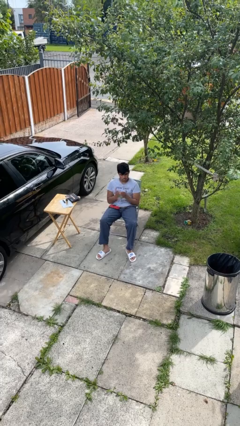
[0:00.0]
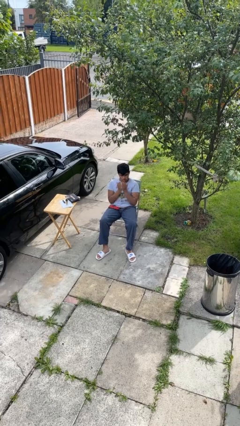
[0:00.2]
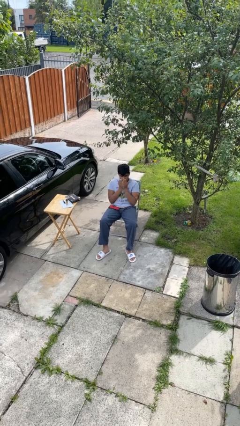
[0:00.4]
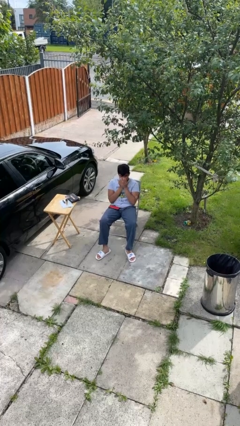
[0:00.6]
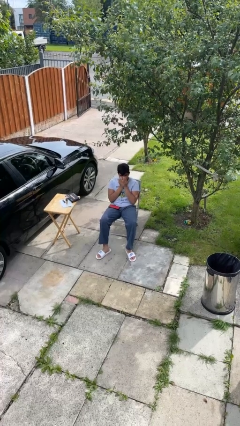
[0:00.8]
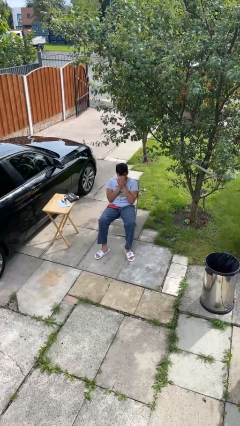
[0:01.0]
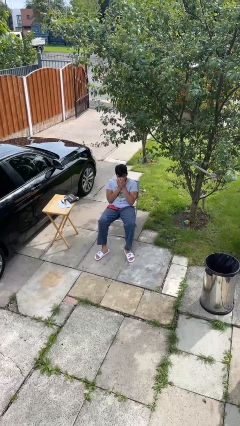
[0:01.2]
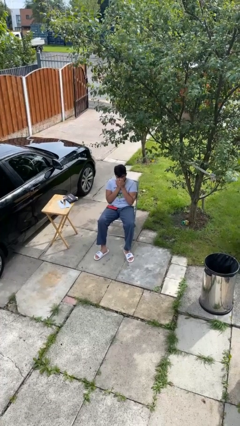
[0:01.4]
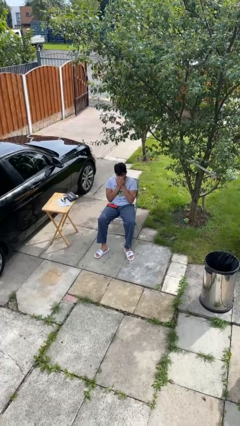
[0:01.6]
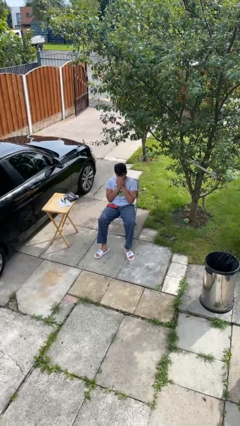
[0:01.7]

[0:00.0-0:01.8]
person blows into hands

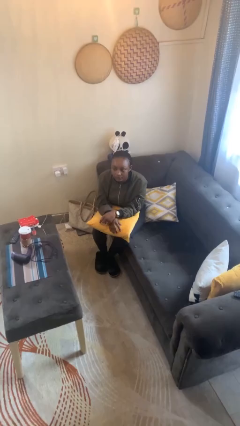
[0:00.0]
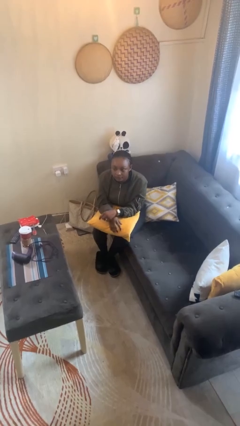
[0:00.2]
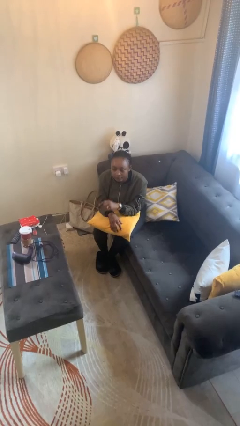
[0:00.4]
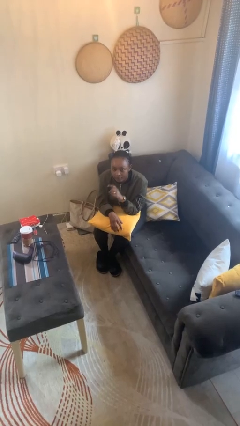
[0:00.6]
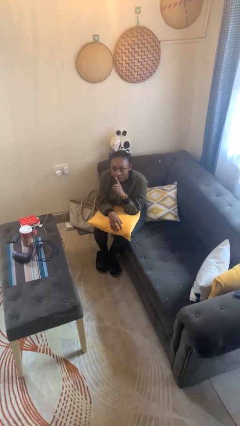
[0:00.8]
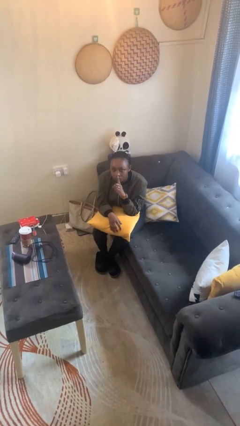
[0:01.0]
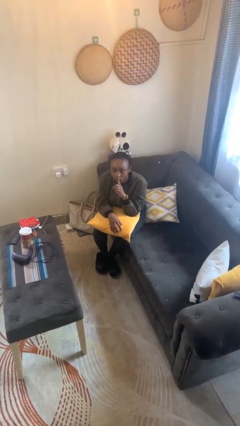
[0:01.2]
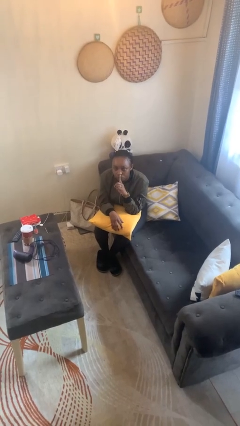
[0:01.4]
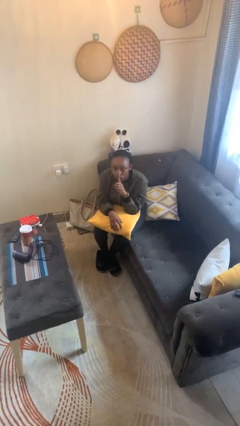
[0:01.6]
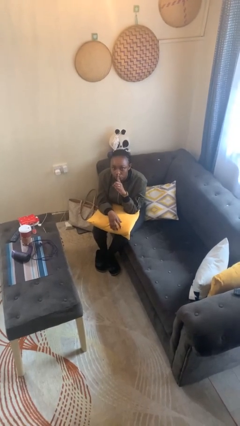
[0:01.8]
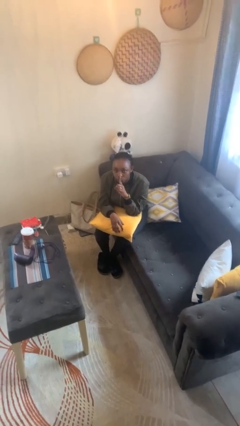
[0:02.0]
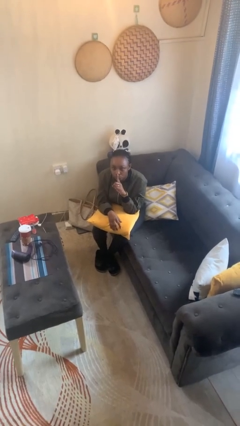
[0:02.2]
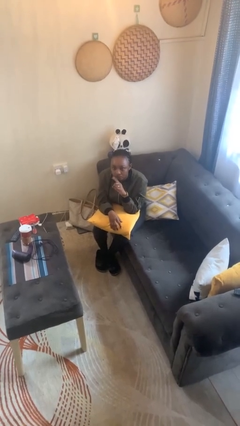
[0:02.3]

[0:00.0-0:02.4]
person gestures be quiet

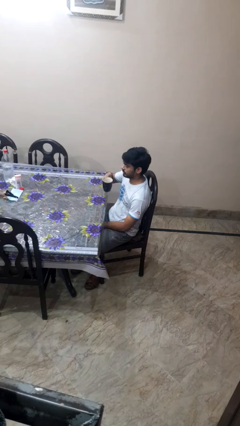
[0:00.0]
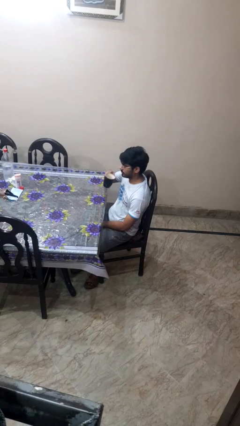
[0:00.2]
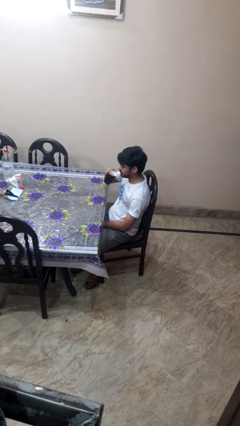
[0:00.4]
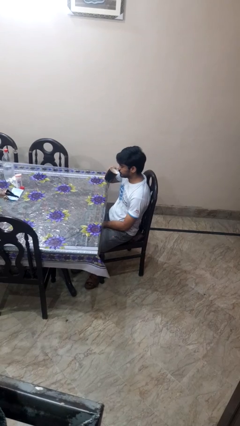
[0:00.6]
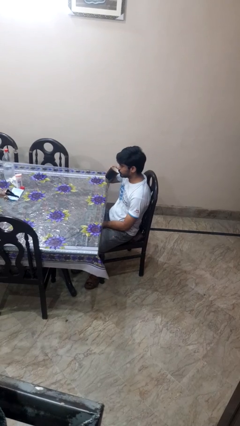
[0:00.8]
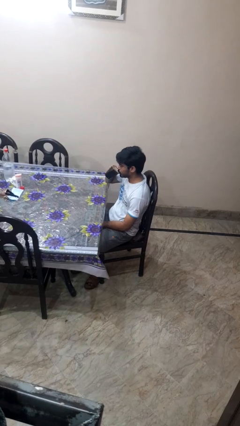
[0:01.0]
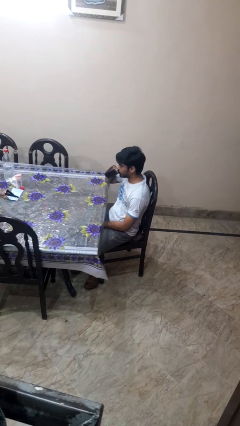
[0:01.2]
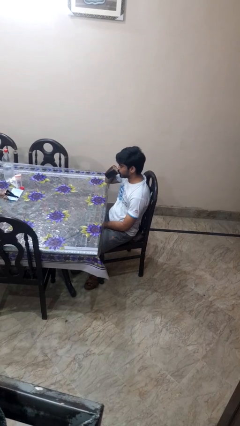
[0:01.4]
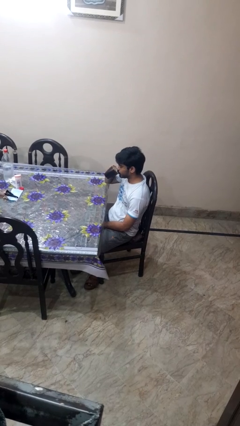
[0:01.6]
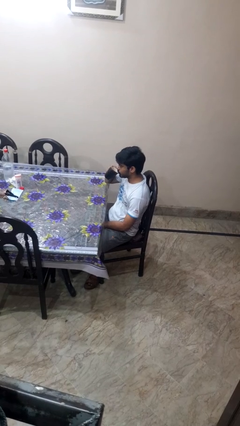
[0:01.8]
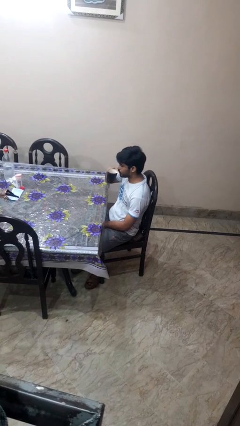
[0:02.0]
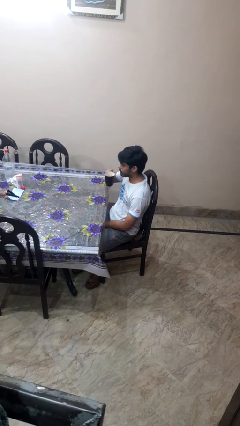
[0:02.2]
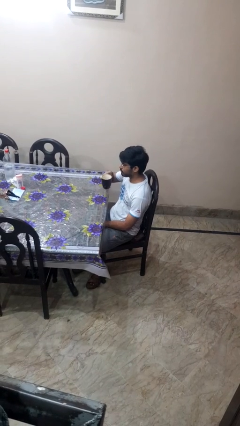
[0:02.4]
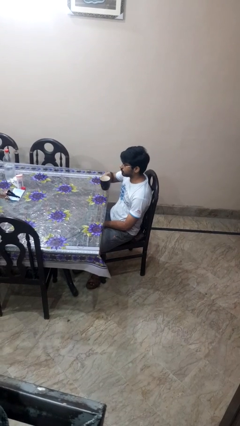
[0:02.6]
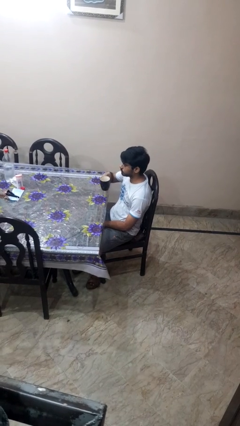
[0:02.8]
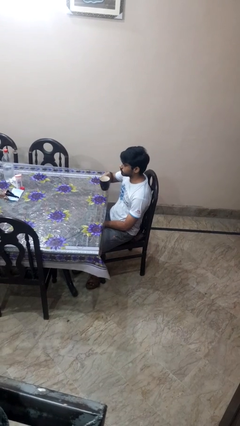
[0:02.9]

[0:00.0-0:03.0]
person drinks from mug

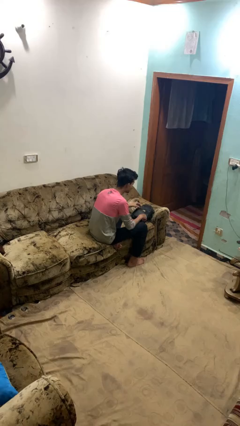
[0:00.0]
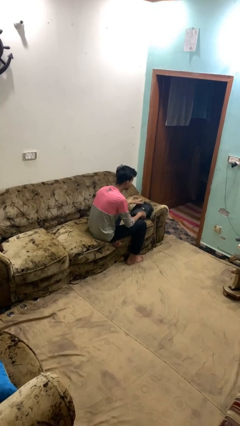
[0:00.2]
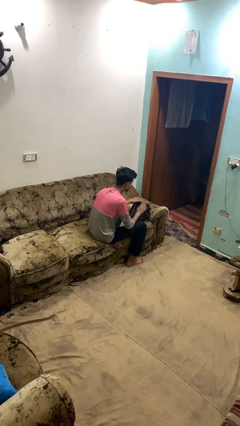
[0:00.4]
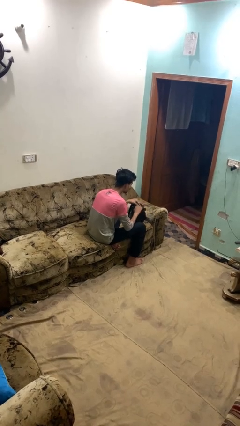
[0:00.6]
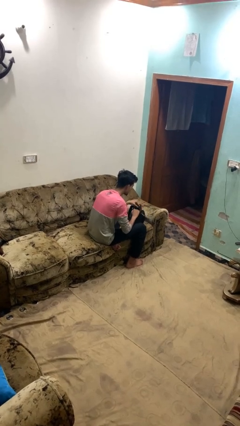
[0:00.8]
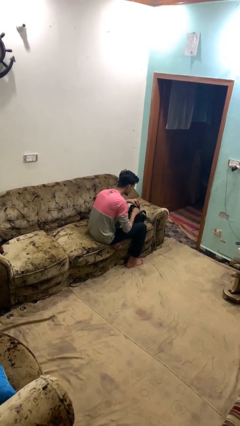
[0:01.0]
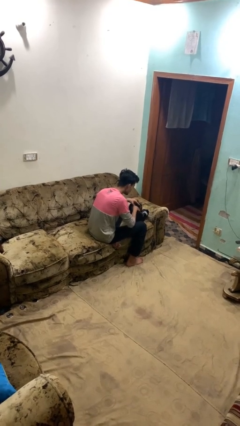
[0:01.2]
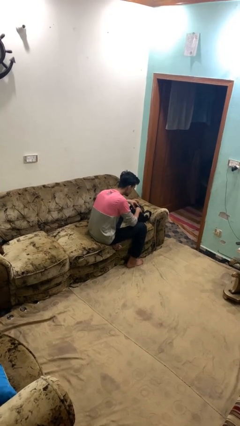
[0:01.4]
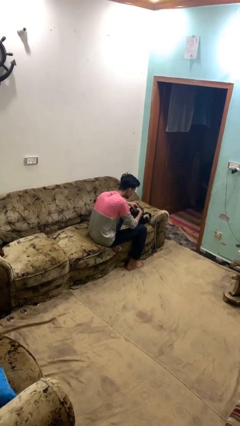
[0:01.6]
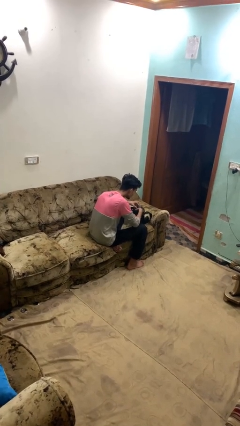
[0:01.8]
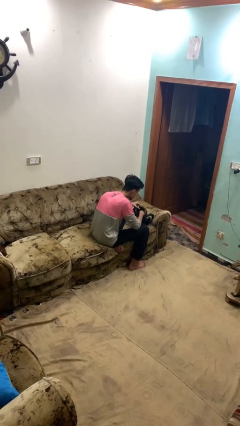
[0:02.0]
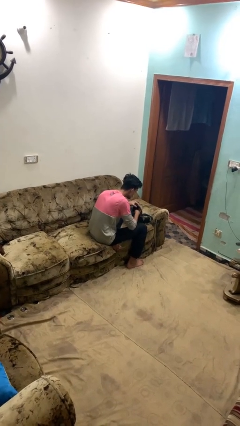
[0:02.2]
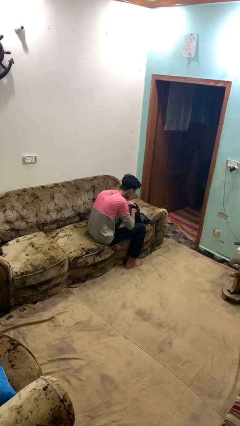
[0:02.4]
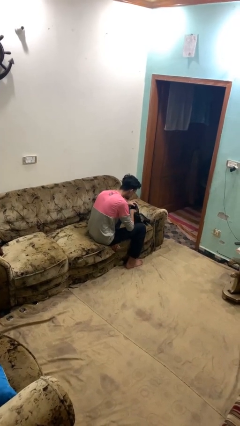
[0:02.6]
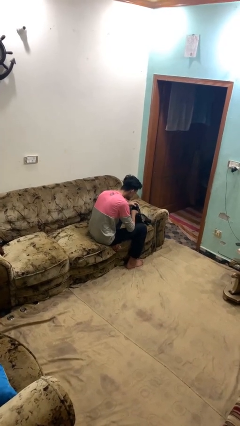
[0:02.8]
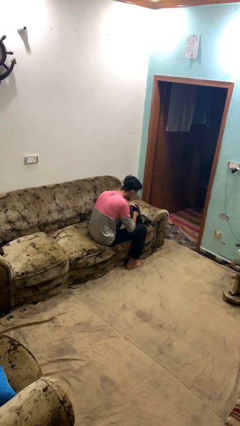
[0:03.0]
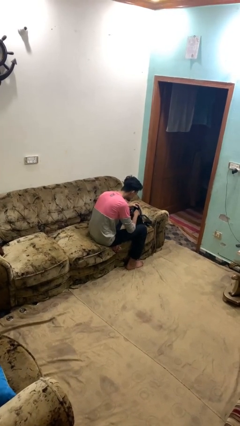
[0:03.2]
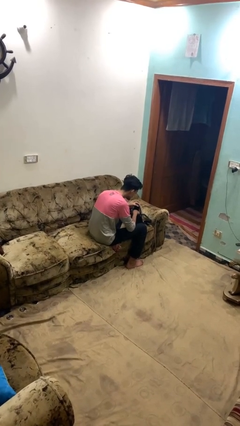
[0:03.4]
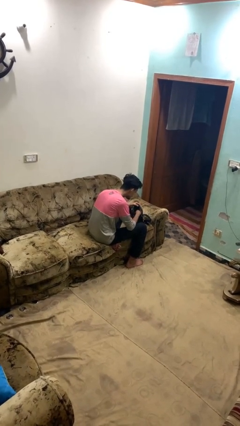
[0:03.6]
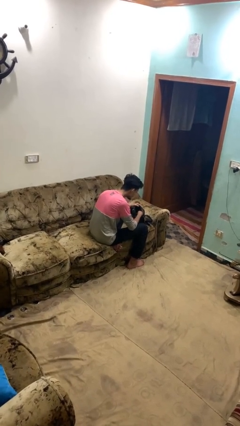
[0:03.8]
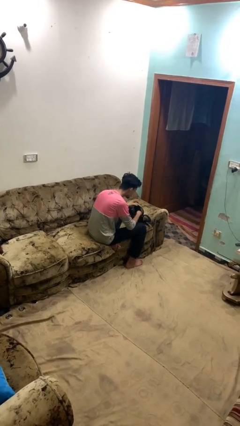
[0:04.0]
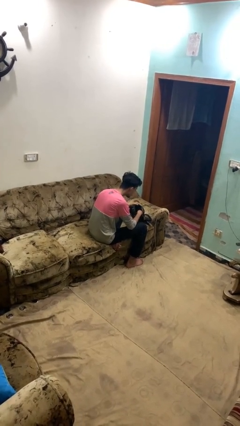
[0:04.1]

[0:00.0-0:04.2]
person searches in backpack

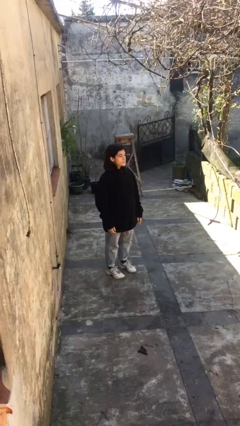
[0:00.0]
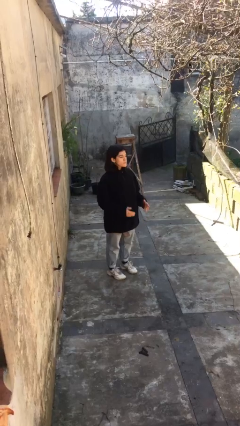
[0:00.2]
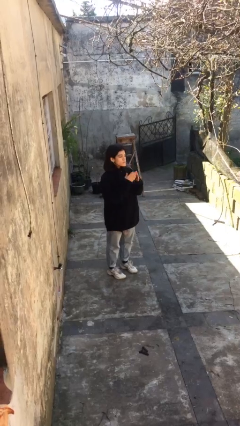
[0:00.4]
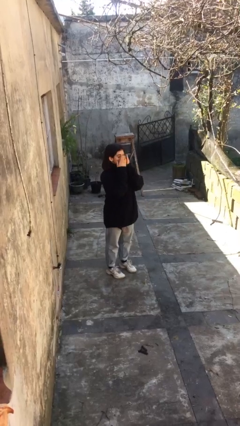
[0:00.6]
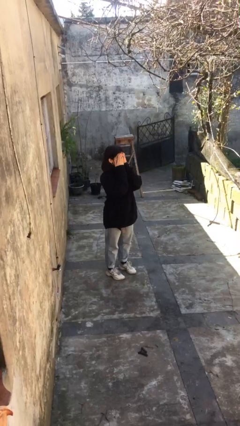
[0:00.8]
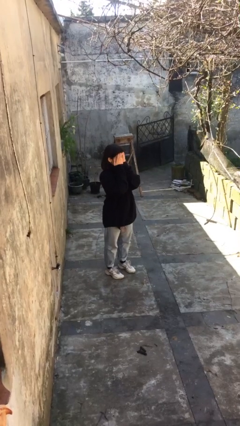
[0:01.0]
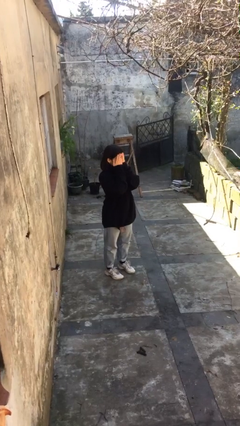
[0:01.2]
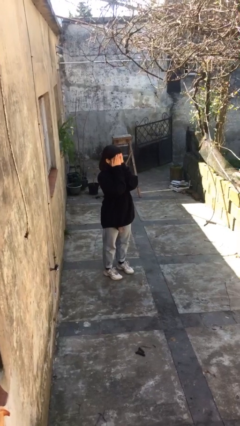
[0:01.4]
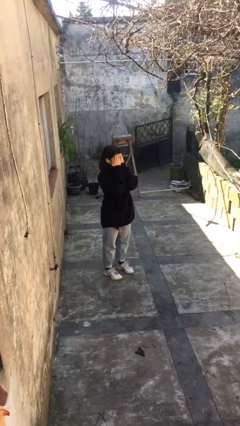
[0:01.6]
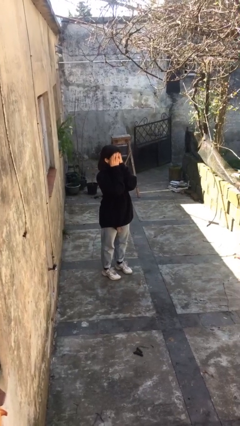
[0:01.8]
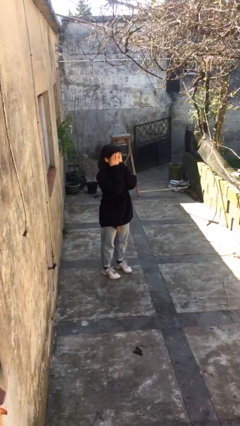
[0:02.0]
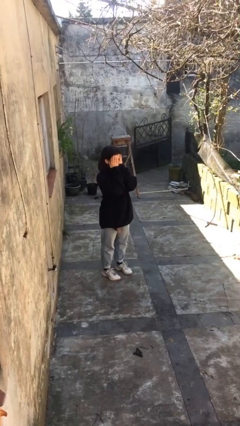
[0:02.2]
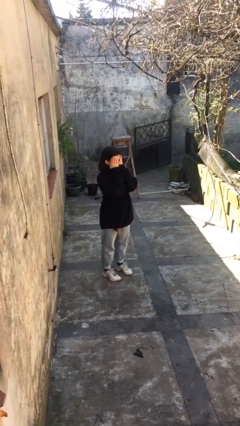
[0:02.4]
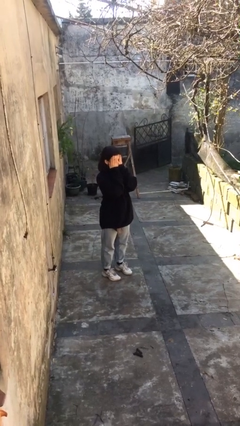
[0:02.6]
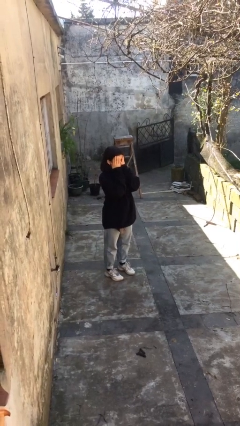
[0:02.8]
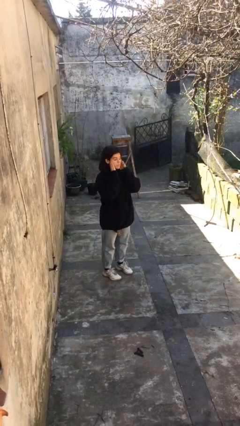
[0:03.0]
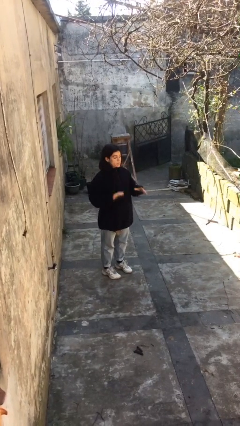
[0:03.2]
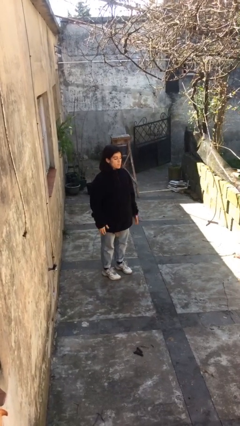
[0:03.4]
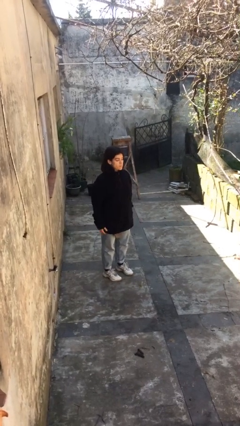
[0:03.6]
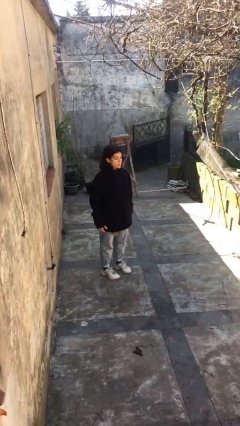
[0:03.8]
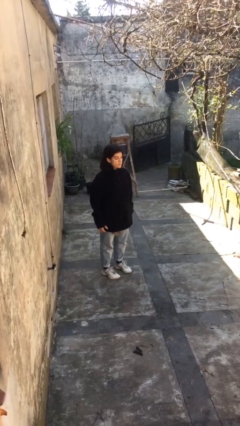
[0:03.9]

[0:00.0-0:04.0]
person covers face with hands

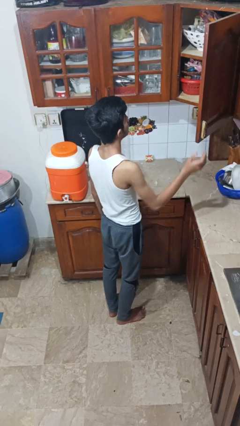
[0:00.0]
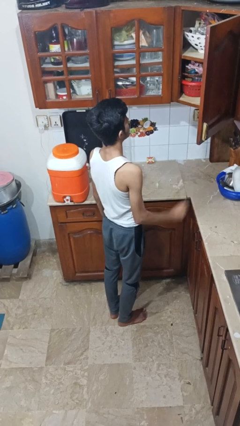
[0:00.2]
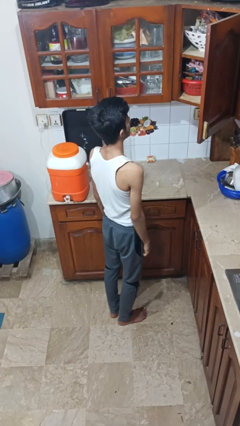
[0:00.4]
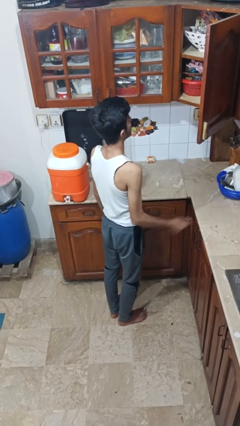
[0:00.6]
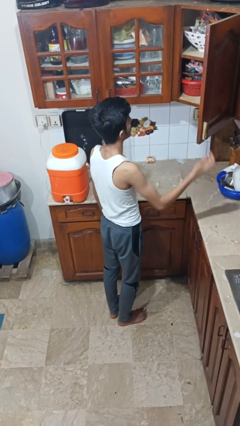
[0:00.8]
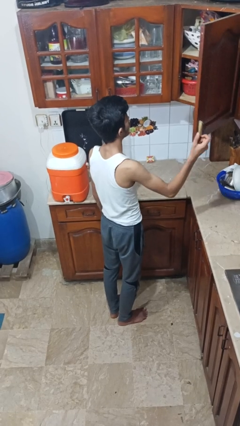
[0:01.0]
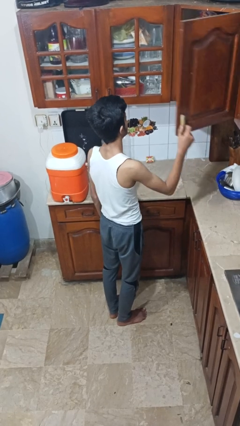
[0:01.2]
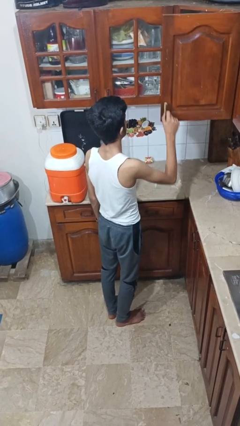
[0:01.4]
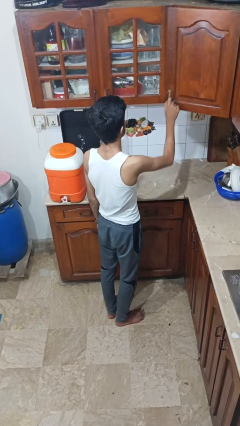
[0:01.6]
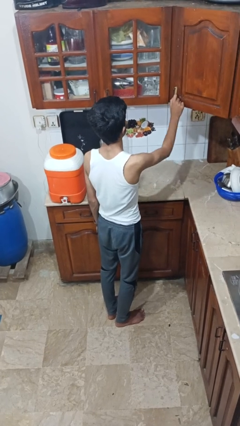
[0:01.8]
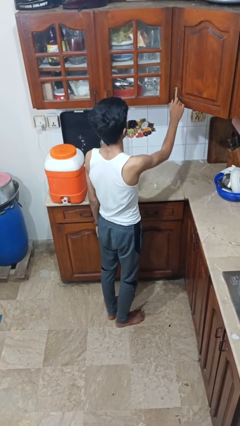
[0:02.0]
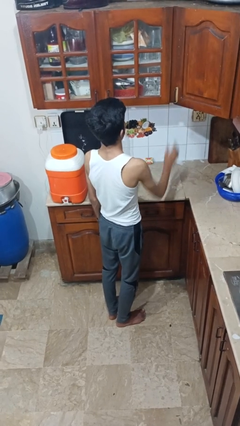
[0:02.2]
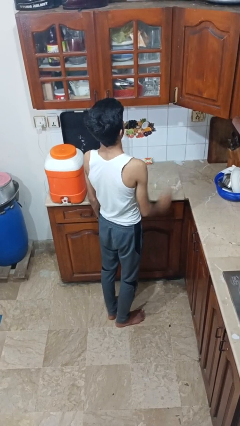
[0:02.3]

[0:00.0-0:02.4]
person closes cabinet
